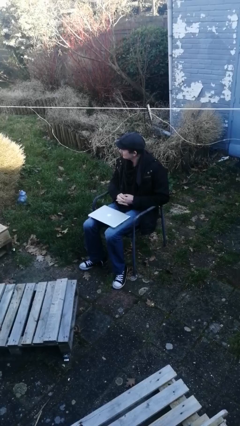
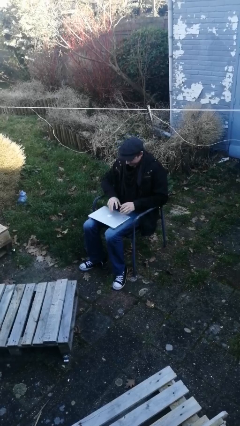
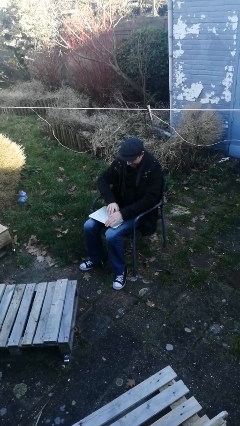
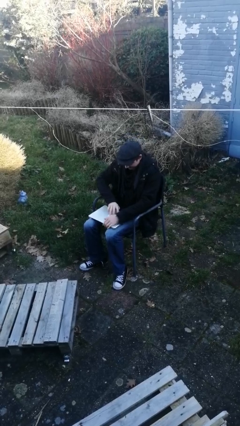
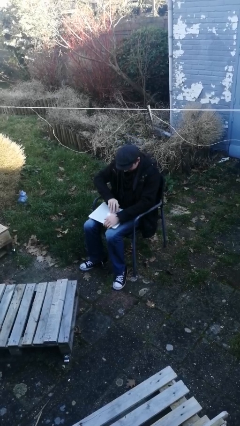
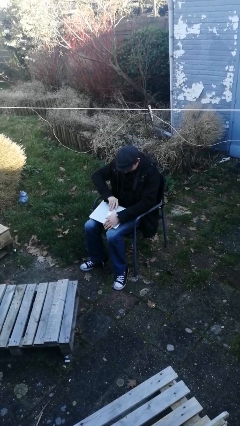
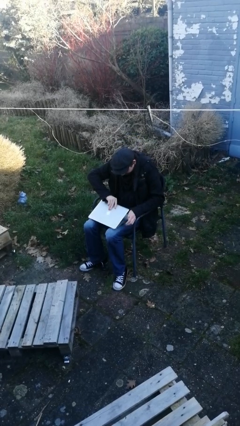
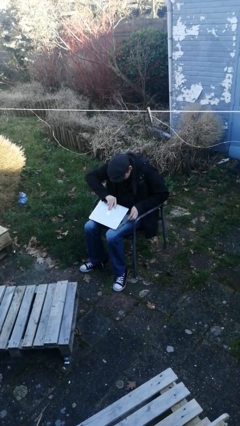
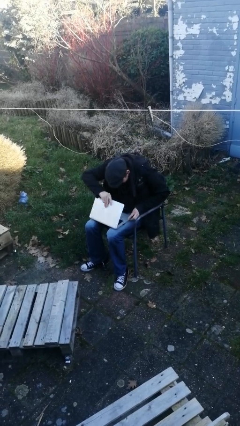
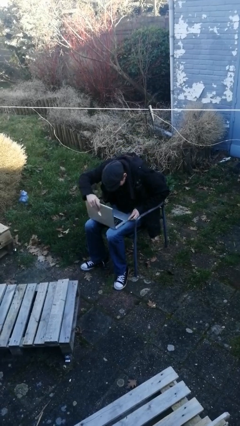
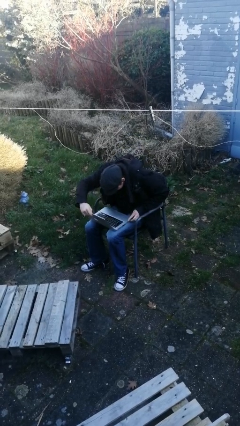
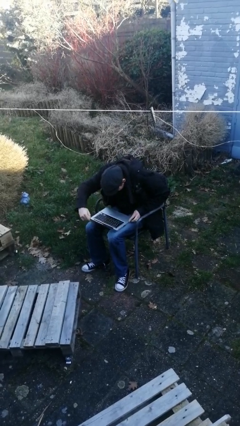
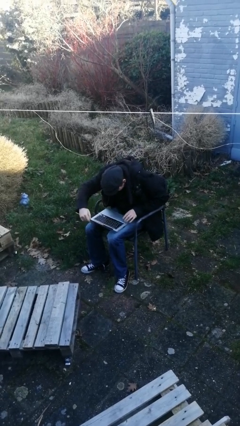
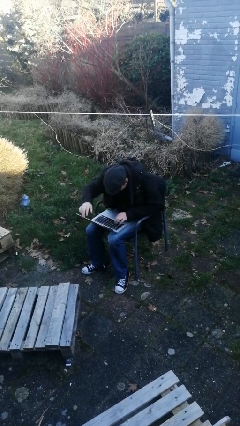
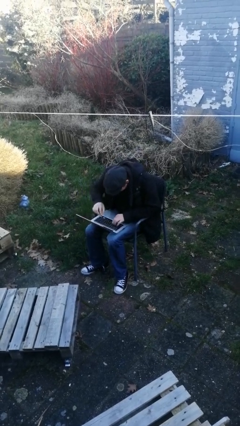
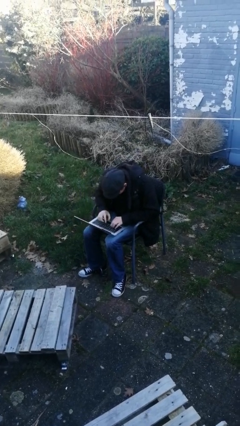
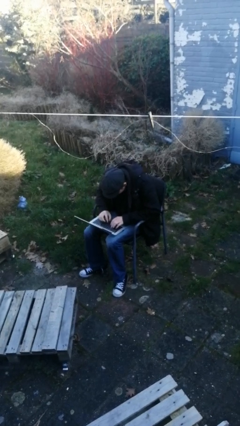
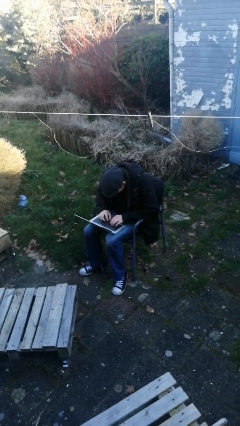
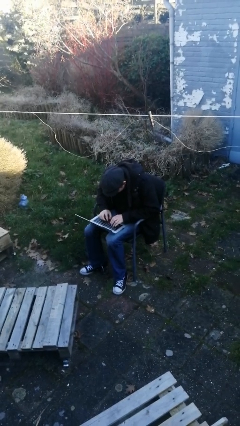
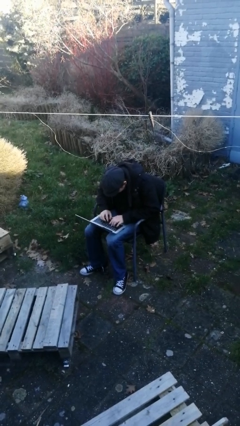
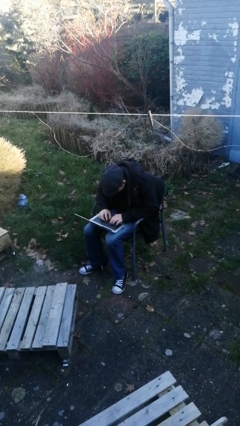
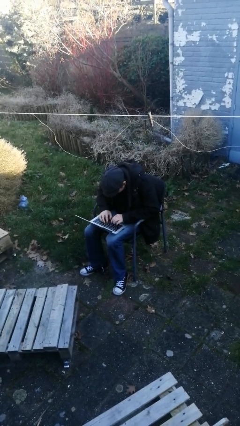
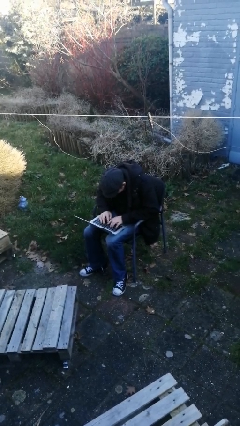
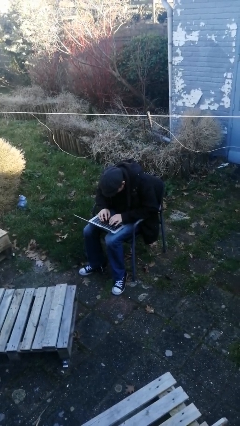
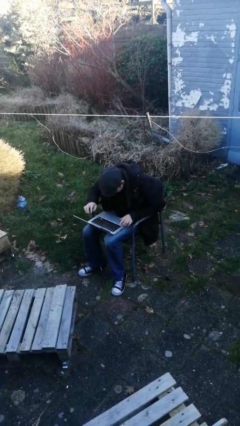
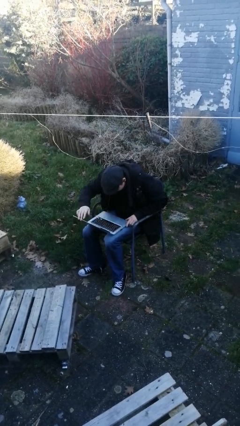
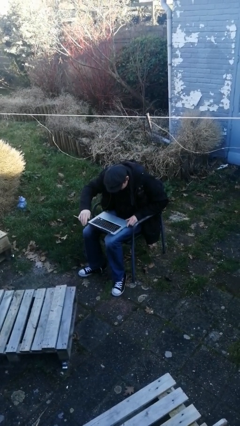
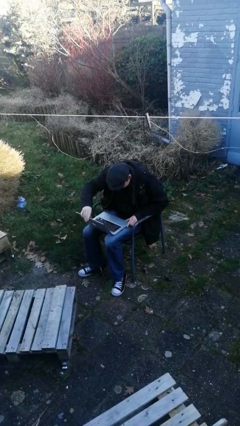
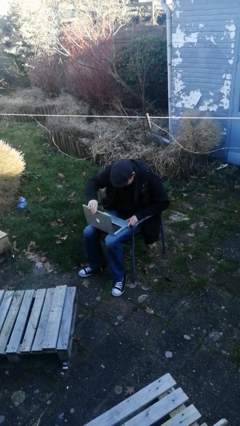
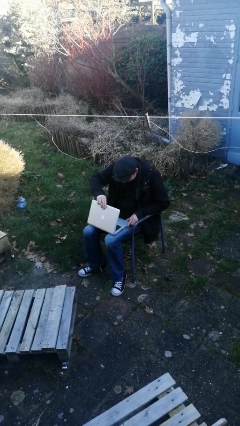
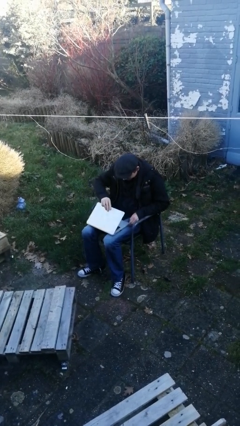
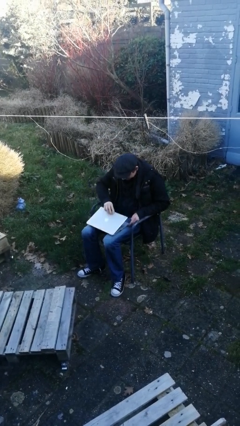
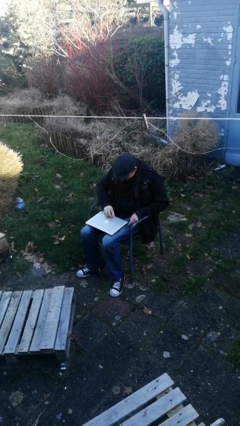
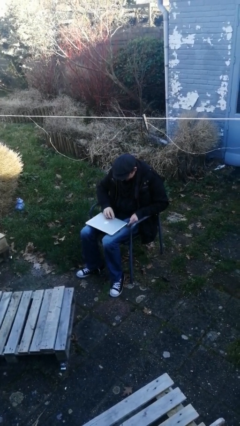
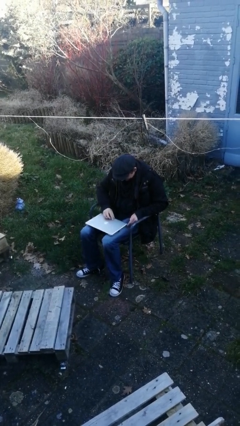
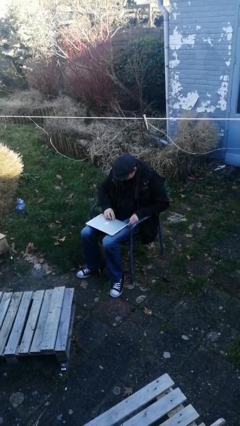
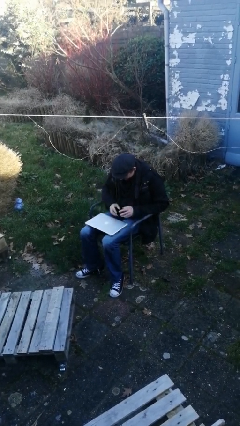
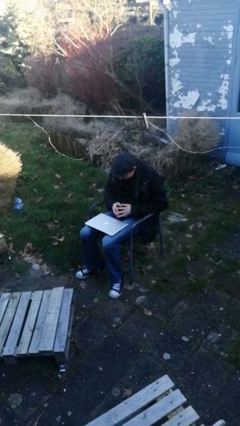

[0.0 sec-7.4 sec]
person interacts with laptop

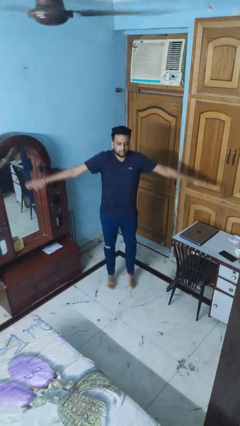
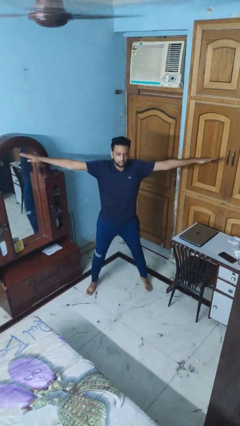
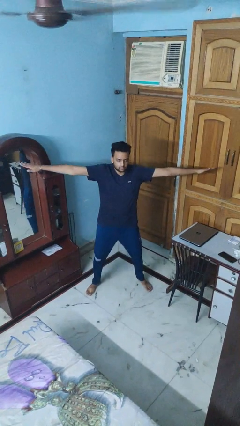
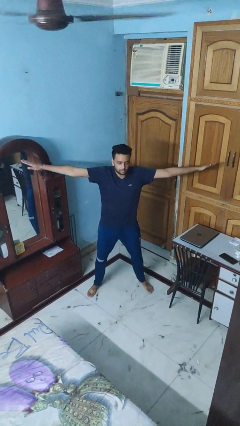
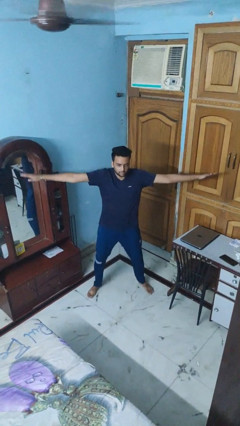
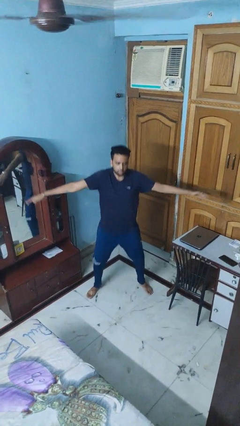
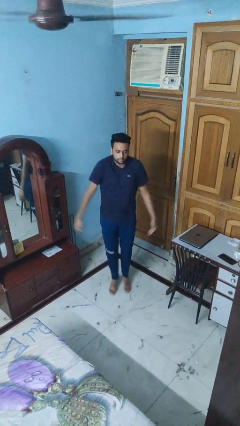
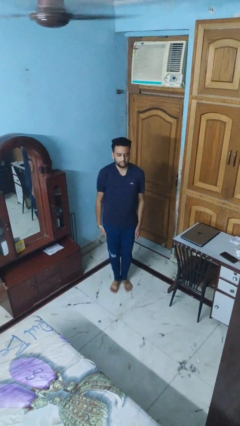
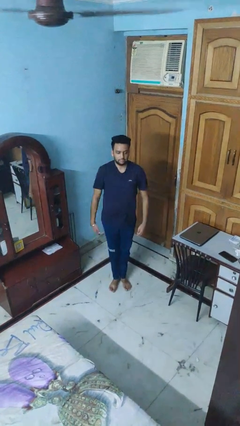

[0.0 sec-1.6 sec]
person exercises with jumping jacks

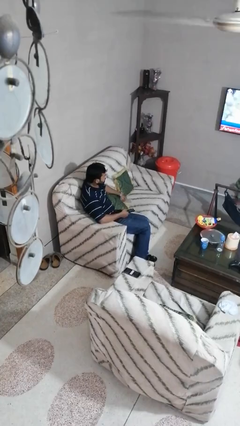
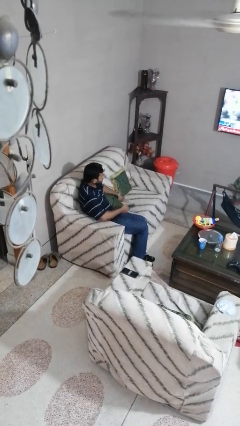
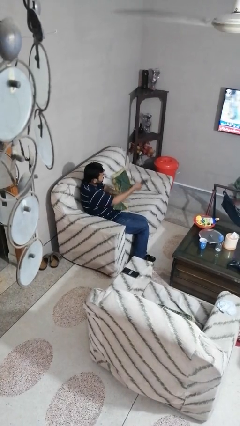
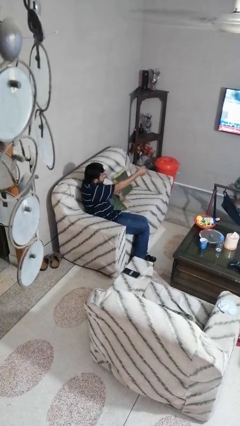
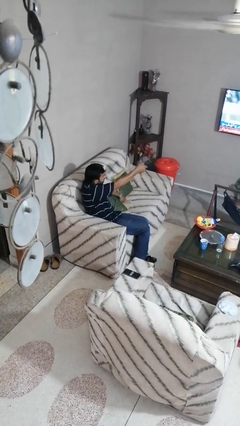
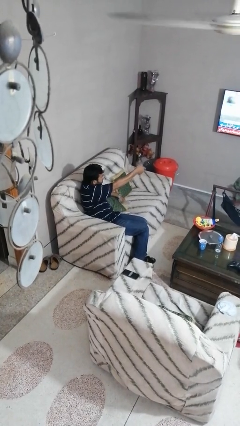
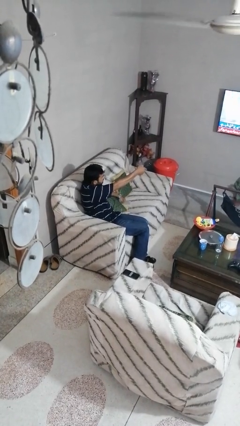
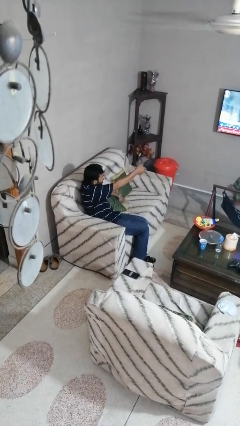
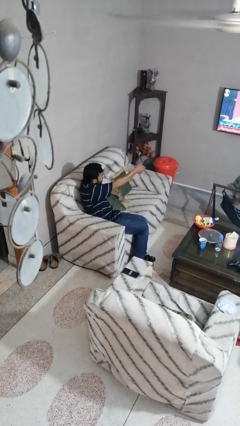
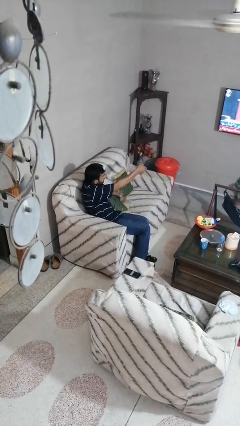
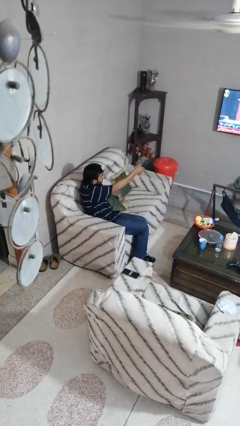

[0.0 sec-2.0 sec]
person uses television remote

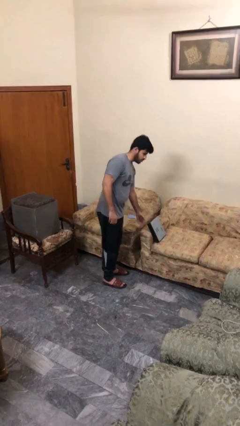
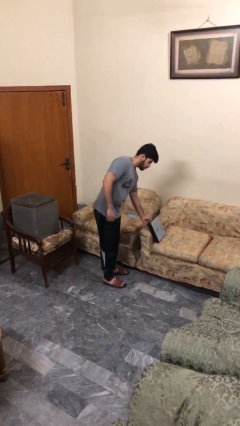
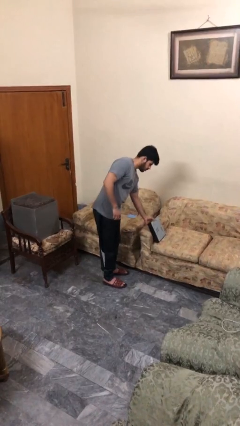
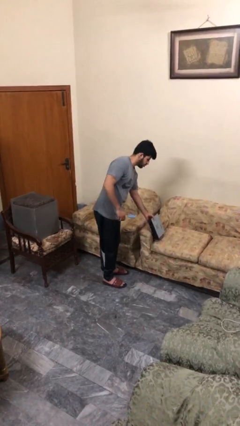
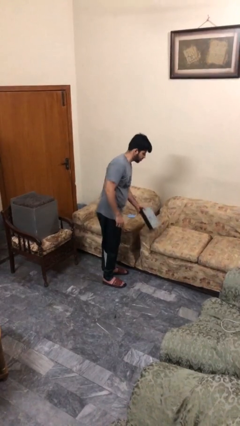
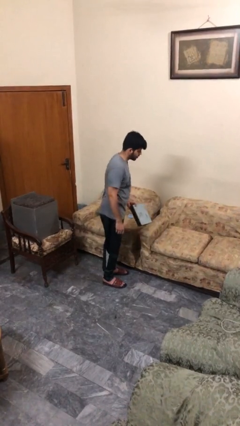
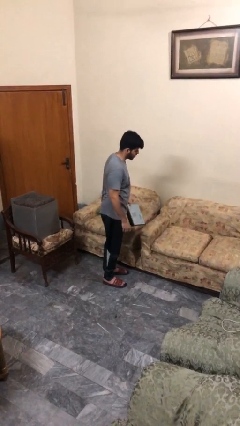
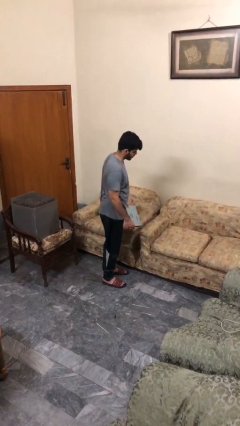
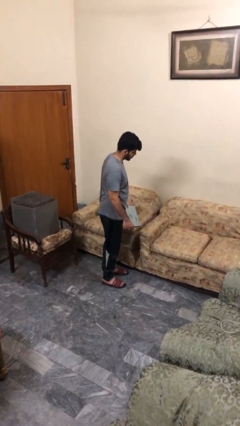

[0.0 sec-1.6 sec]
person picks up object from couch

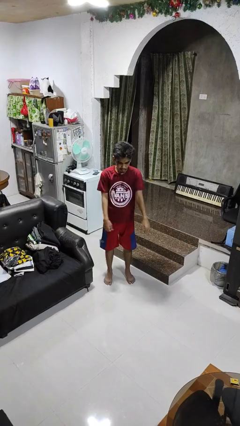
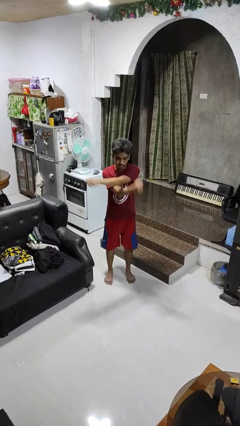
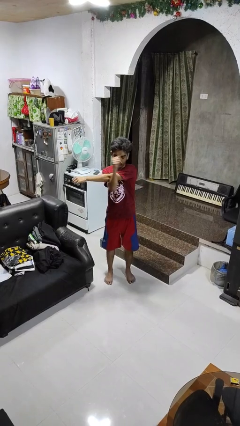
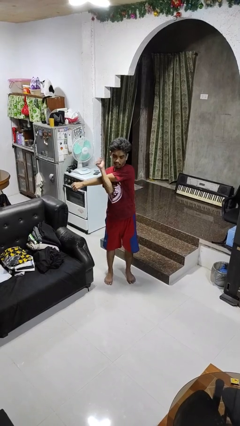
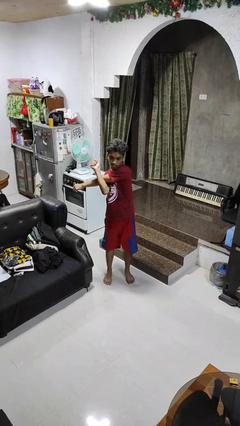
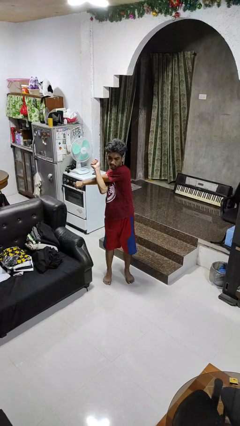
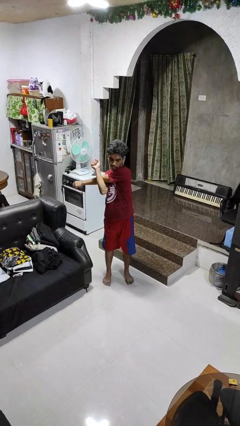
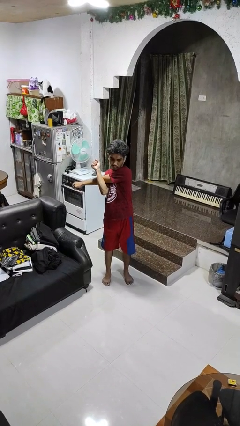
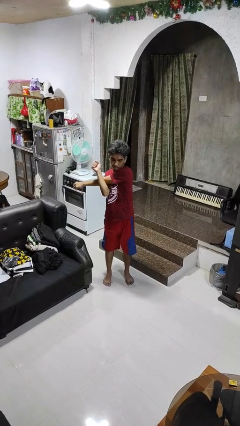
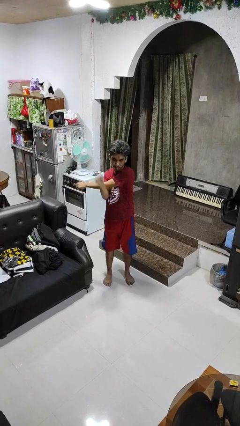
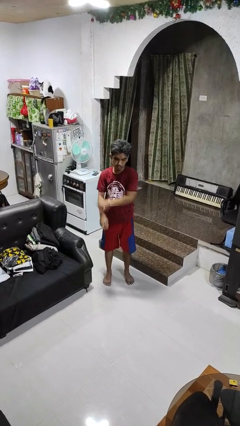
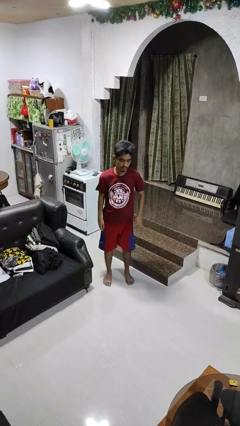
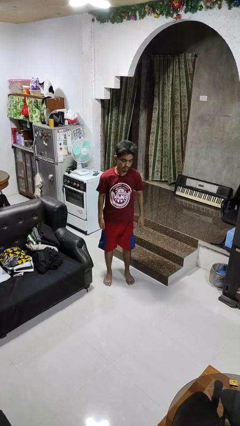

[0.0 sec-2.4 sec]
person stretches arms to side

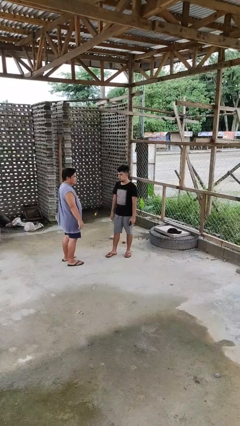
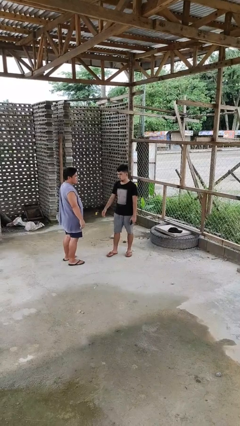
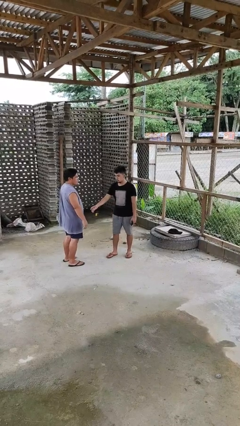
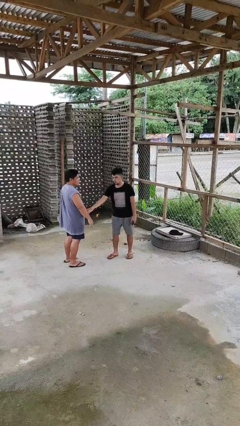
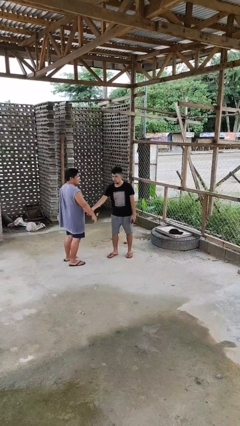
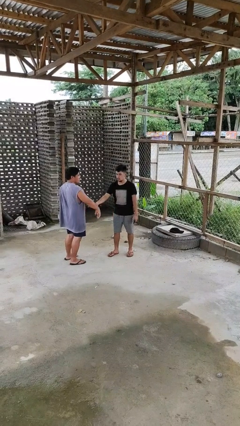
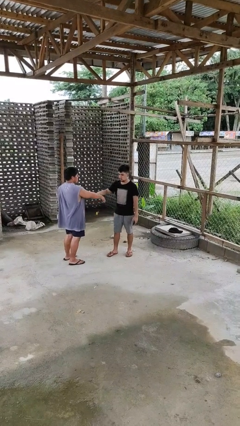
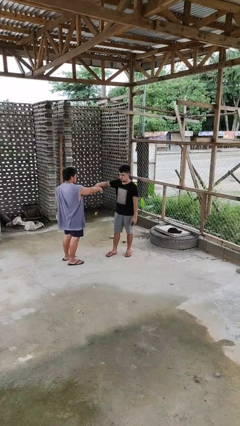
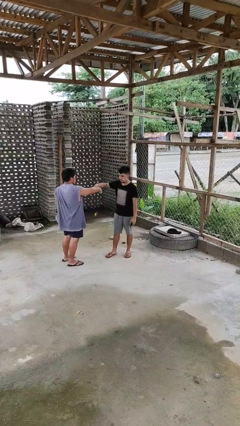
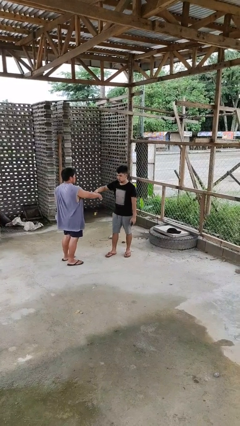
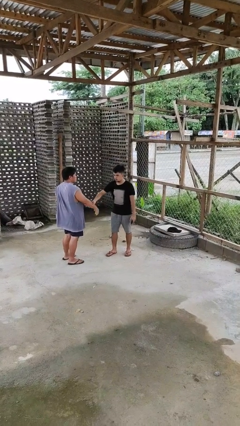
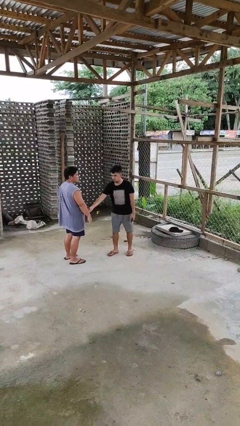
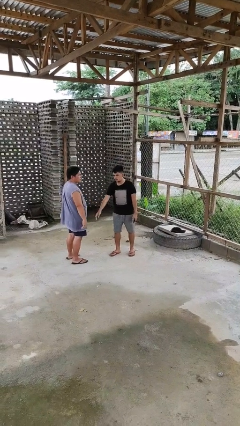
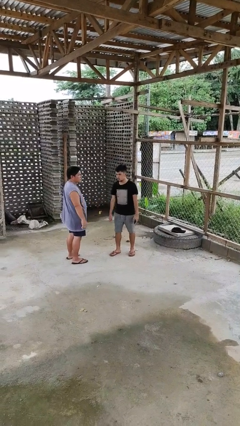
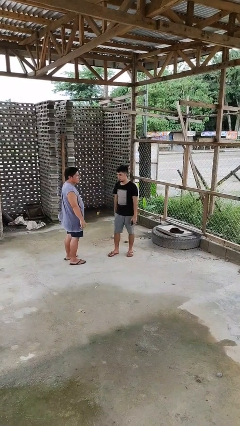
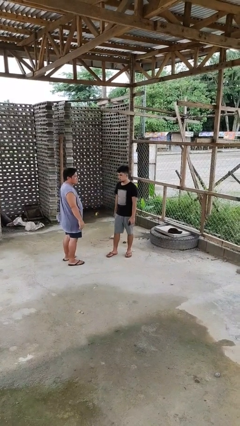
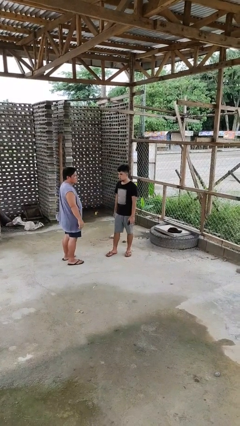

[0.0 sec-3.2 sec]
person grabs person by forearm
